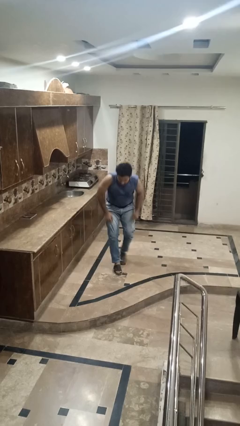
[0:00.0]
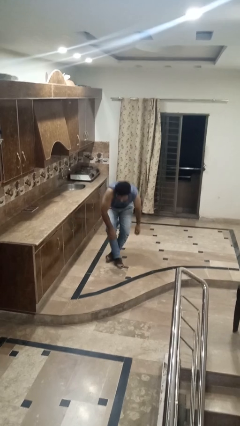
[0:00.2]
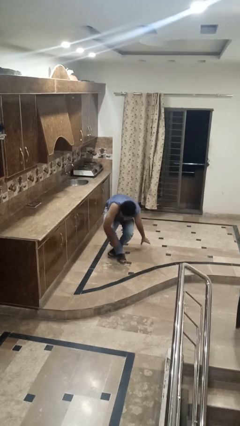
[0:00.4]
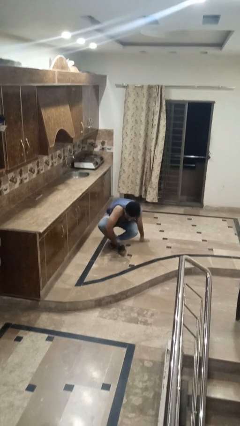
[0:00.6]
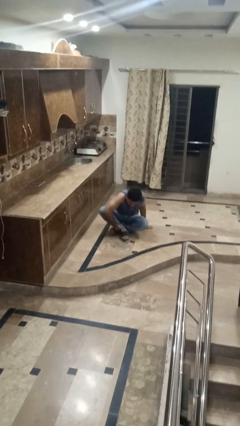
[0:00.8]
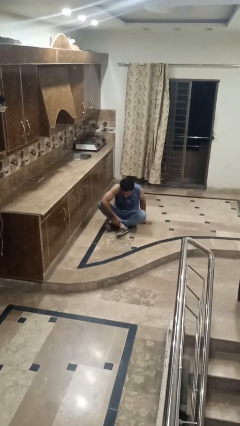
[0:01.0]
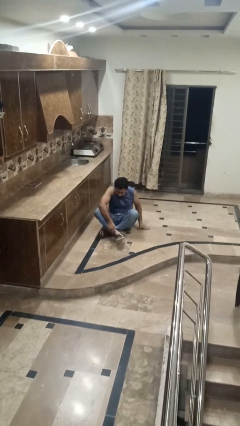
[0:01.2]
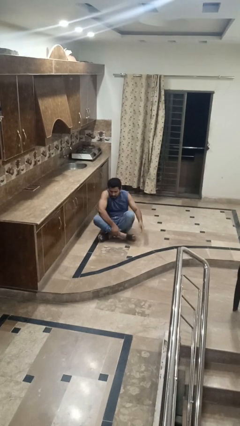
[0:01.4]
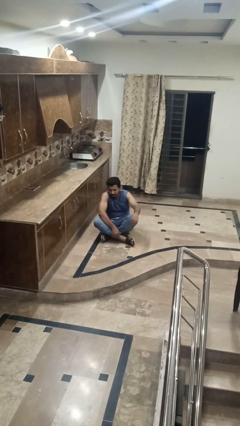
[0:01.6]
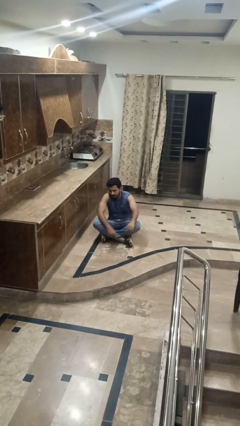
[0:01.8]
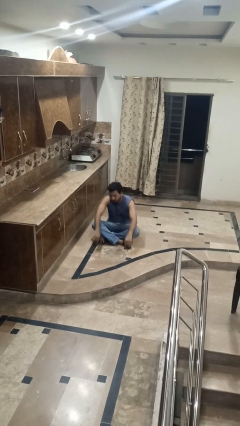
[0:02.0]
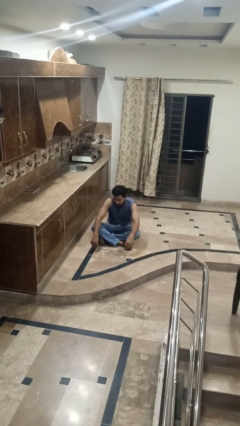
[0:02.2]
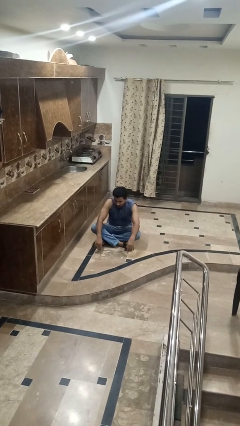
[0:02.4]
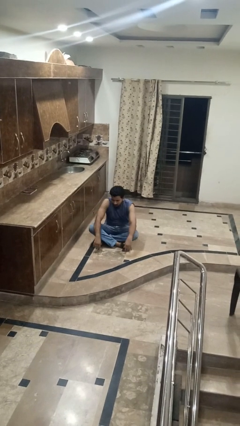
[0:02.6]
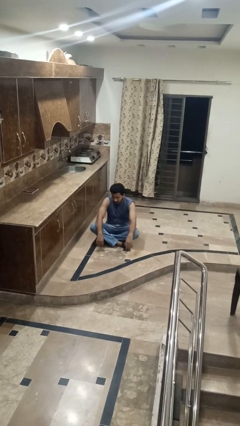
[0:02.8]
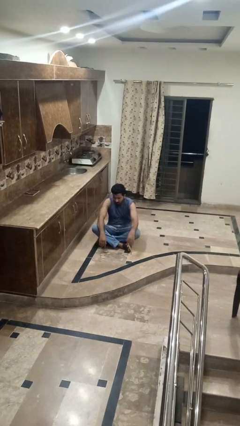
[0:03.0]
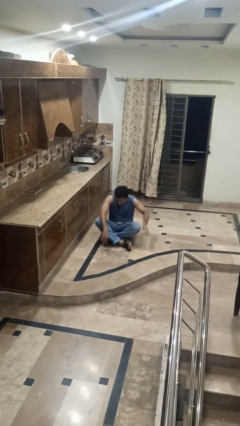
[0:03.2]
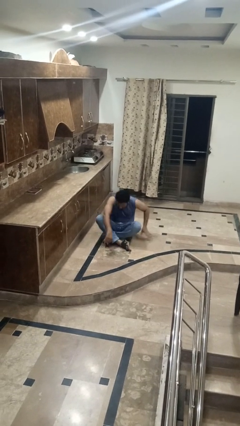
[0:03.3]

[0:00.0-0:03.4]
person sits crisscross

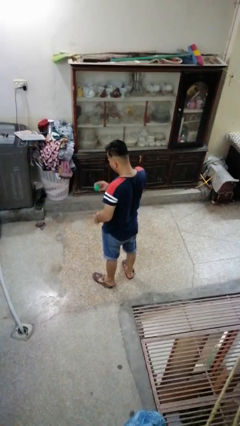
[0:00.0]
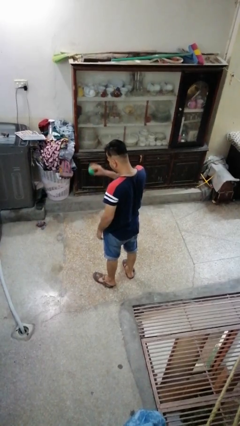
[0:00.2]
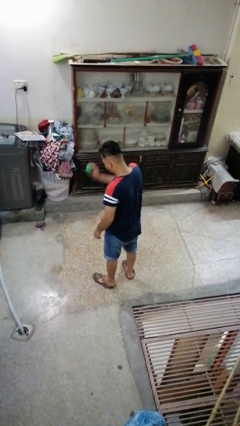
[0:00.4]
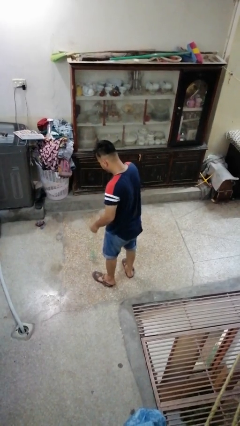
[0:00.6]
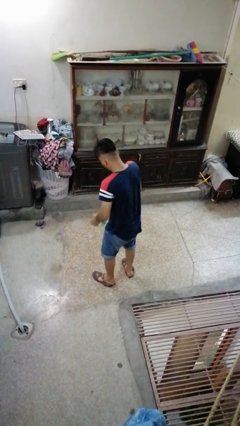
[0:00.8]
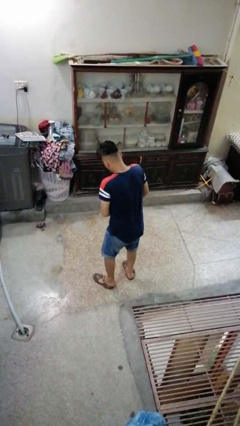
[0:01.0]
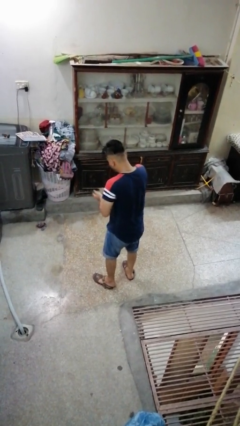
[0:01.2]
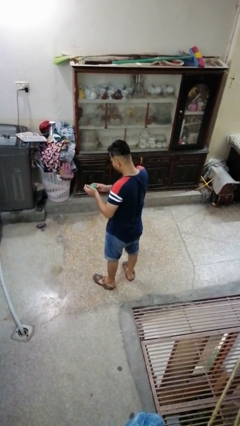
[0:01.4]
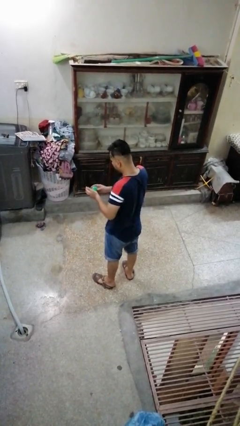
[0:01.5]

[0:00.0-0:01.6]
person bounces ball on floor

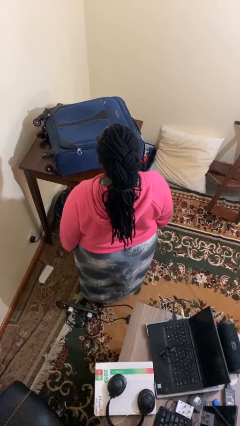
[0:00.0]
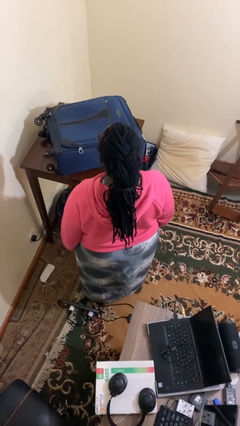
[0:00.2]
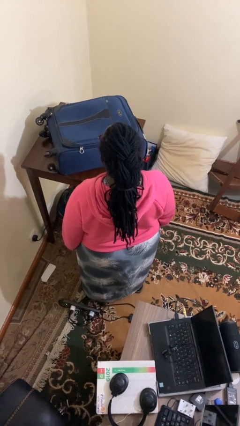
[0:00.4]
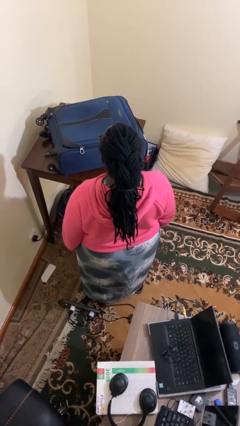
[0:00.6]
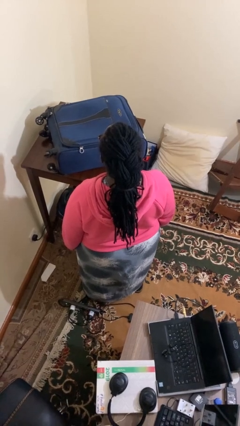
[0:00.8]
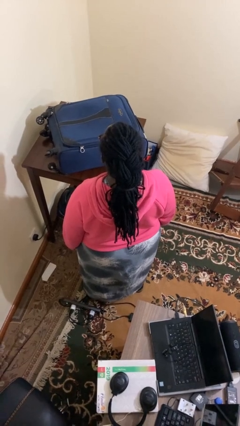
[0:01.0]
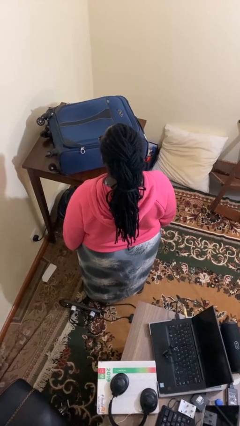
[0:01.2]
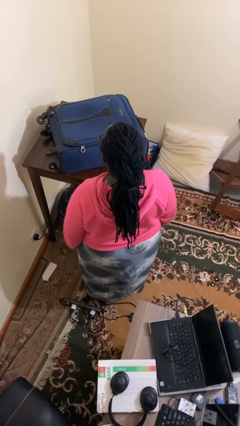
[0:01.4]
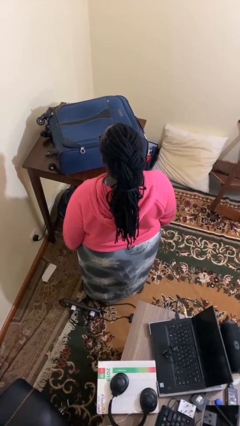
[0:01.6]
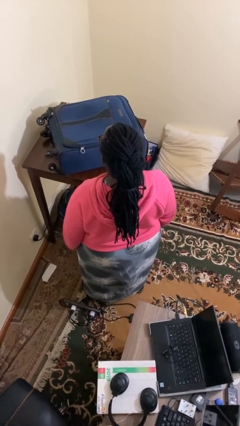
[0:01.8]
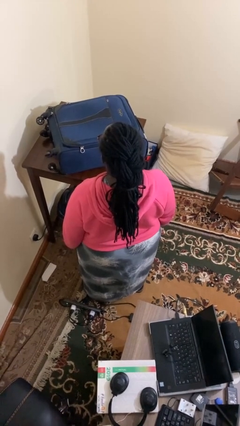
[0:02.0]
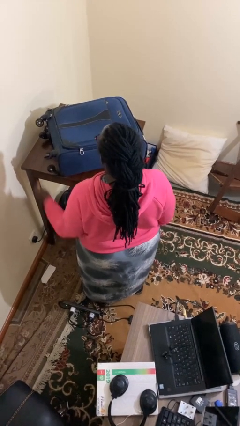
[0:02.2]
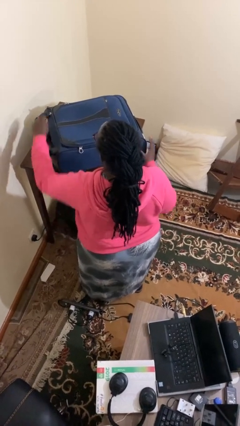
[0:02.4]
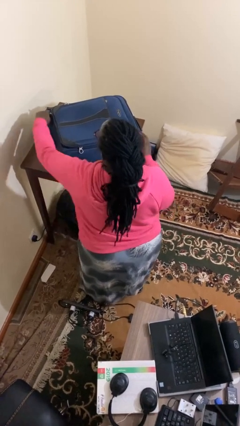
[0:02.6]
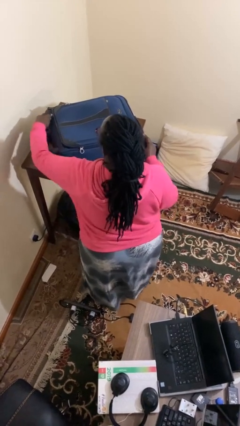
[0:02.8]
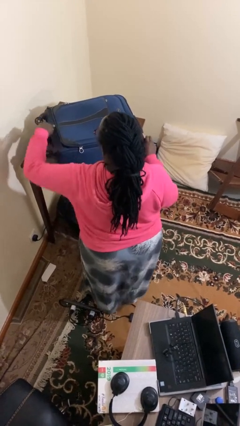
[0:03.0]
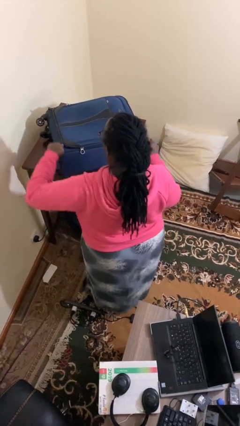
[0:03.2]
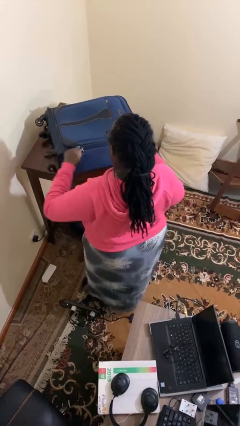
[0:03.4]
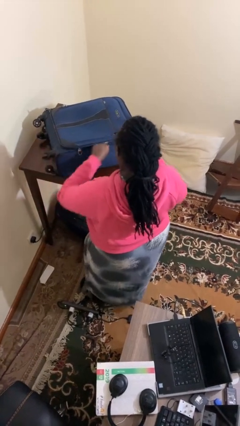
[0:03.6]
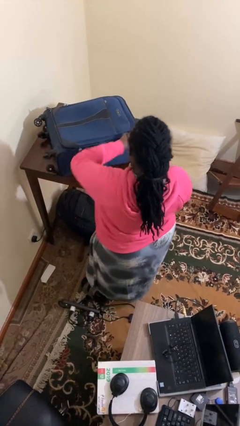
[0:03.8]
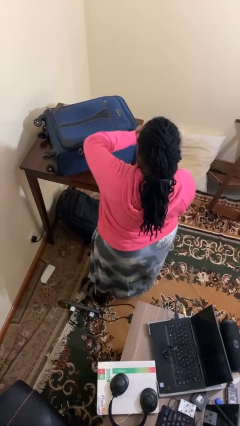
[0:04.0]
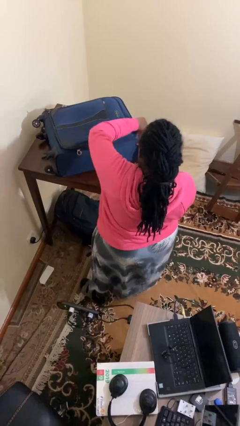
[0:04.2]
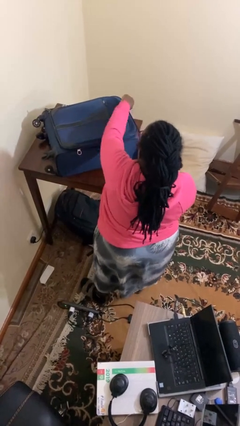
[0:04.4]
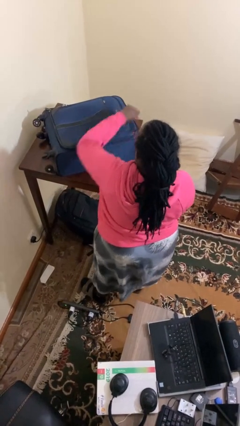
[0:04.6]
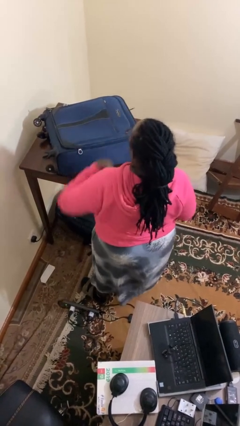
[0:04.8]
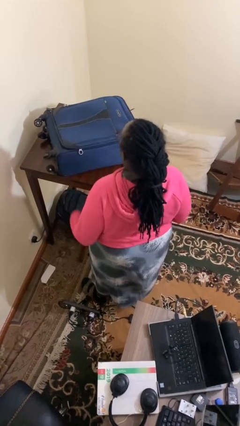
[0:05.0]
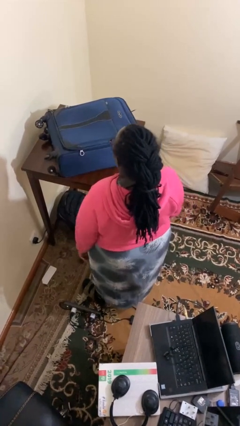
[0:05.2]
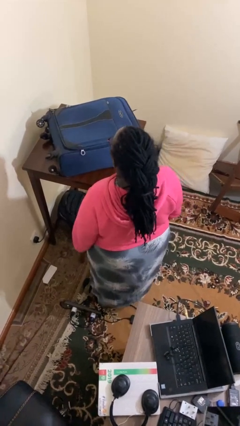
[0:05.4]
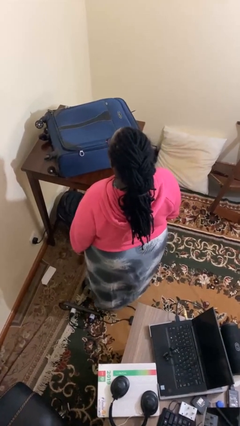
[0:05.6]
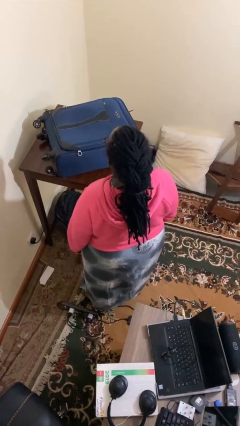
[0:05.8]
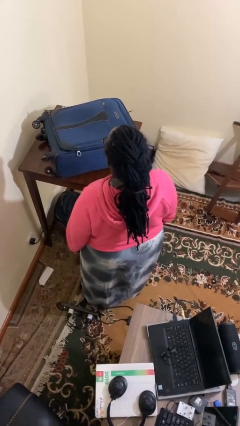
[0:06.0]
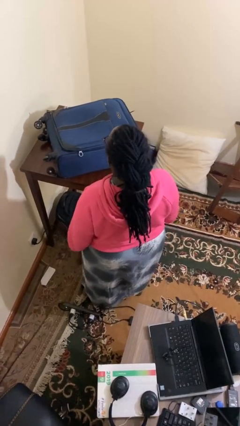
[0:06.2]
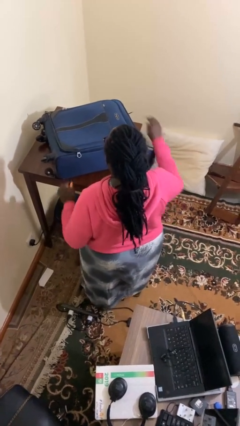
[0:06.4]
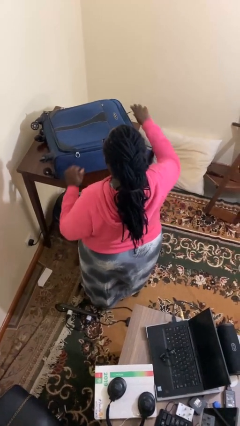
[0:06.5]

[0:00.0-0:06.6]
person takes object from kitchen drawer

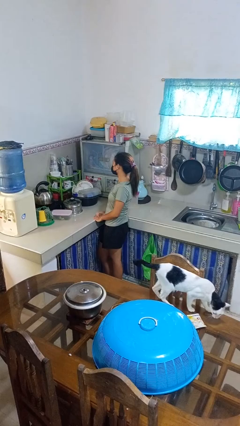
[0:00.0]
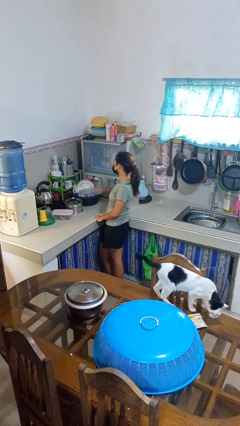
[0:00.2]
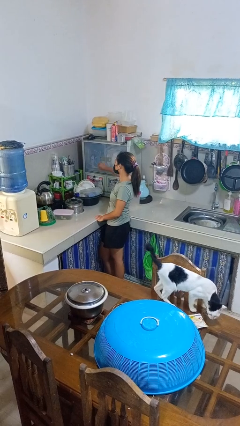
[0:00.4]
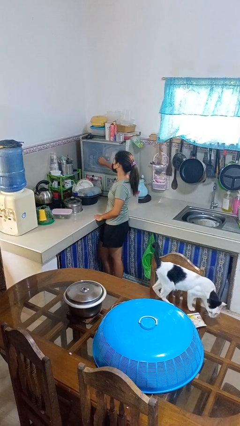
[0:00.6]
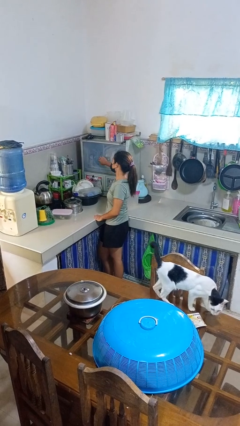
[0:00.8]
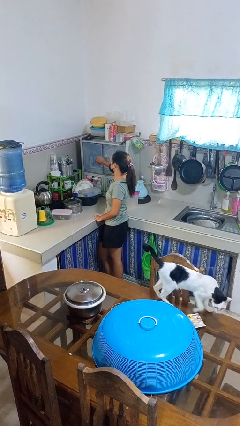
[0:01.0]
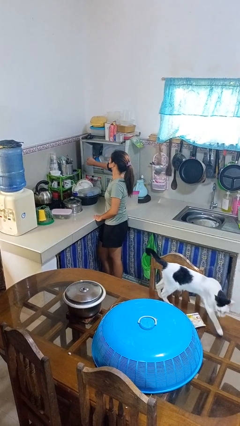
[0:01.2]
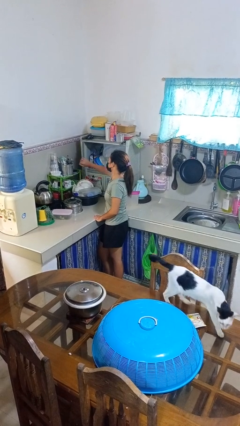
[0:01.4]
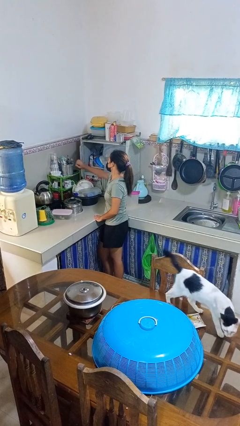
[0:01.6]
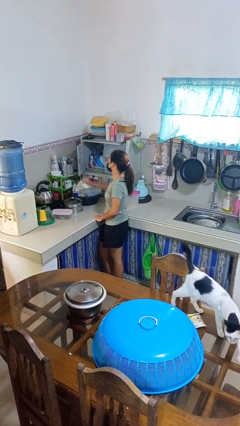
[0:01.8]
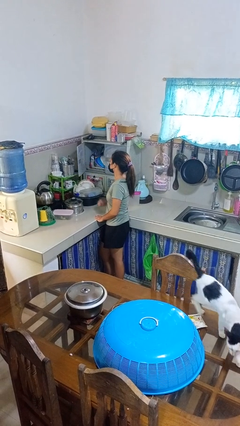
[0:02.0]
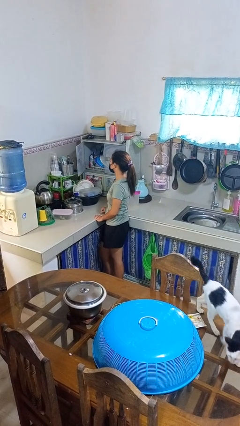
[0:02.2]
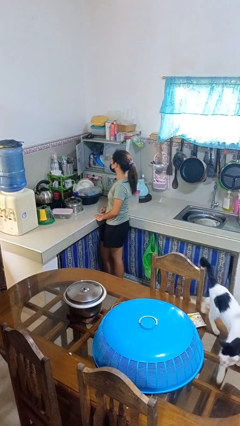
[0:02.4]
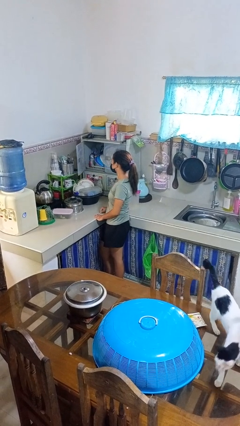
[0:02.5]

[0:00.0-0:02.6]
person opens kitchen drawer

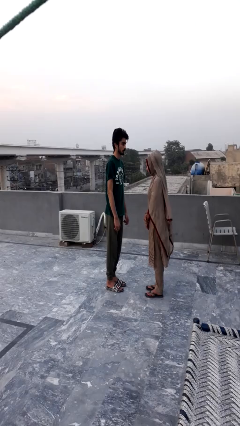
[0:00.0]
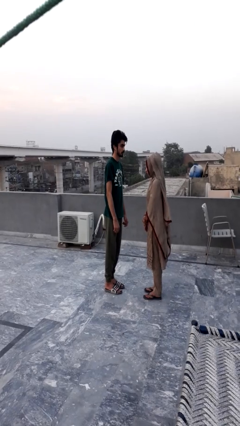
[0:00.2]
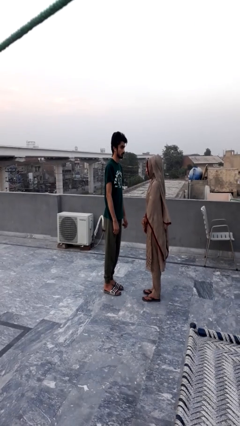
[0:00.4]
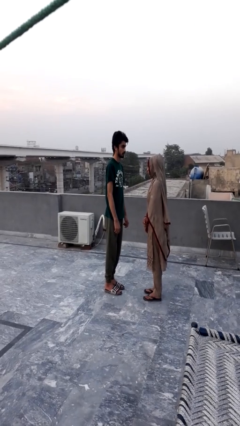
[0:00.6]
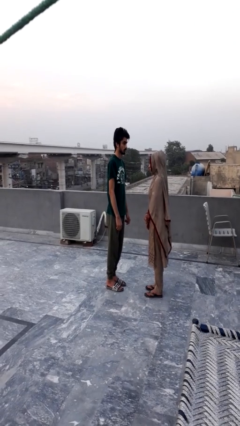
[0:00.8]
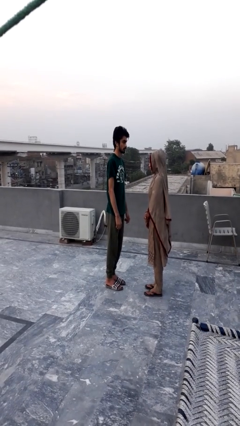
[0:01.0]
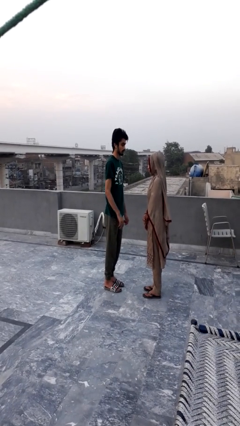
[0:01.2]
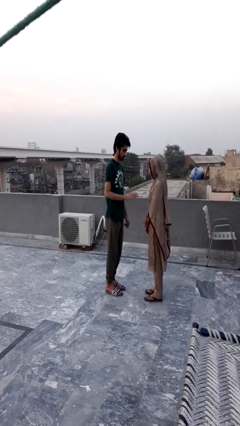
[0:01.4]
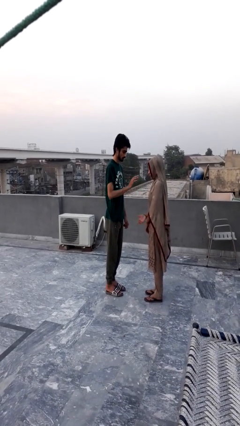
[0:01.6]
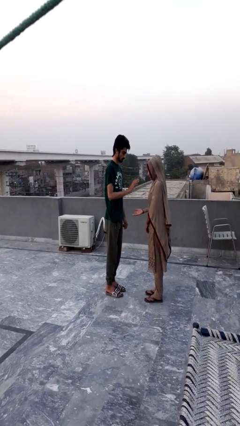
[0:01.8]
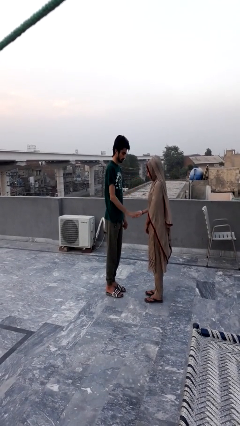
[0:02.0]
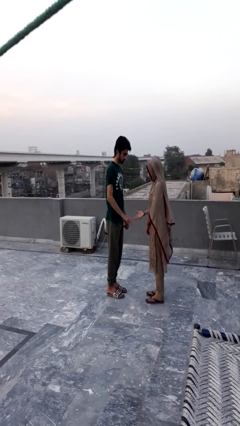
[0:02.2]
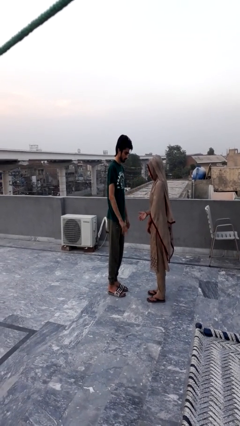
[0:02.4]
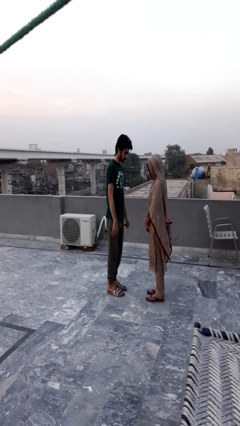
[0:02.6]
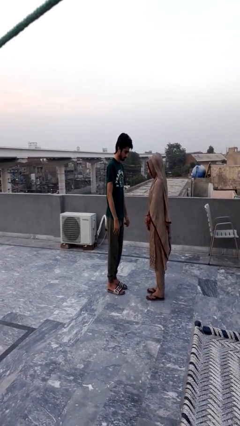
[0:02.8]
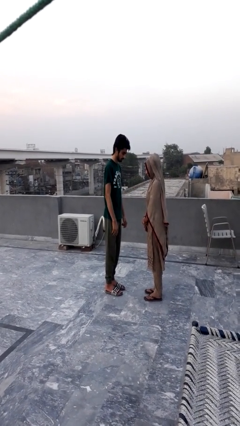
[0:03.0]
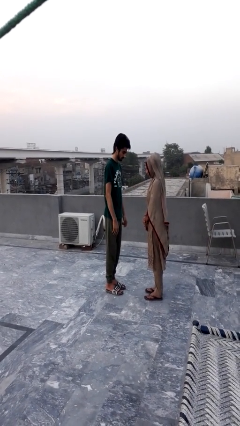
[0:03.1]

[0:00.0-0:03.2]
person highfives hand
